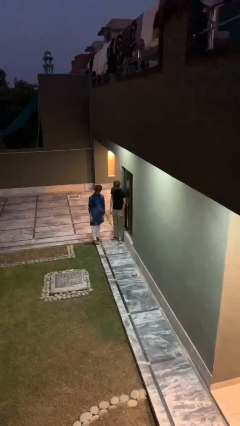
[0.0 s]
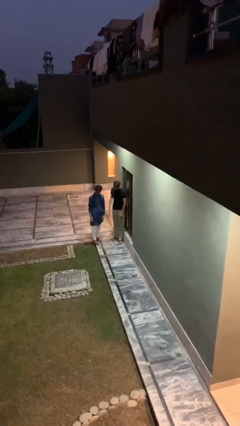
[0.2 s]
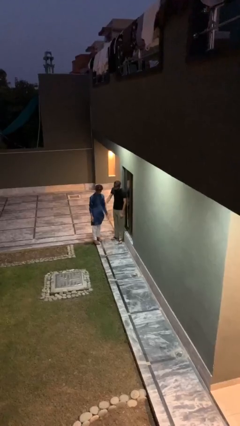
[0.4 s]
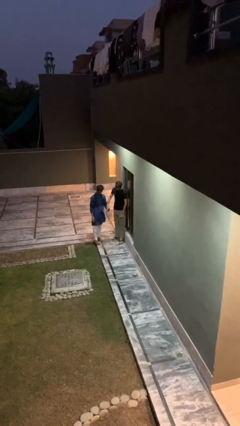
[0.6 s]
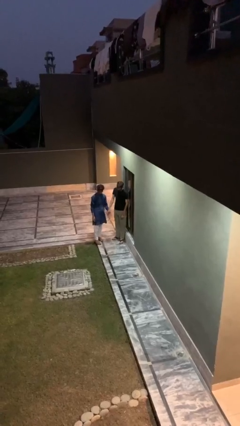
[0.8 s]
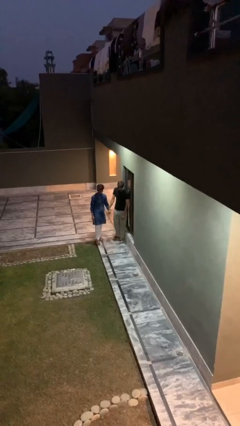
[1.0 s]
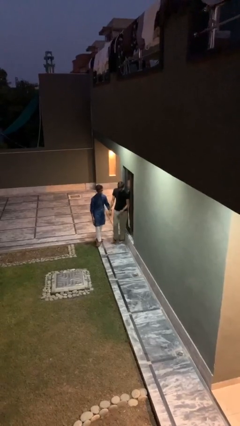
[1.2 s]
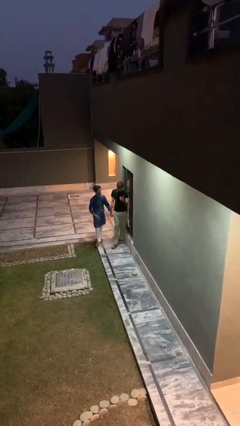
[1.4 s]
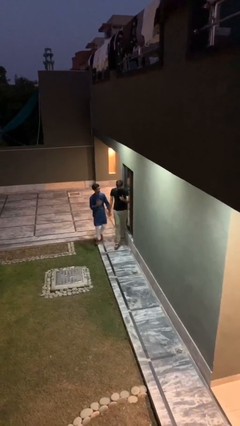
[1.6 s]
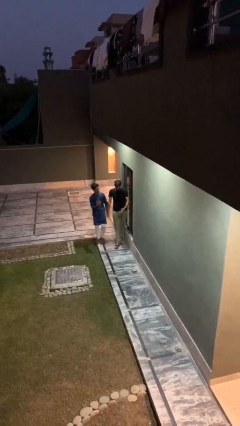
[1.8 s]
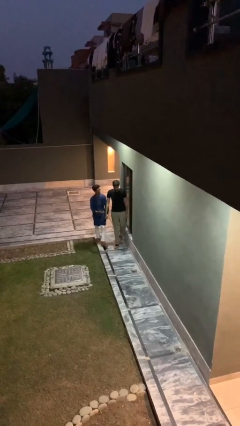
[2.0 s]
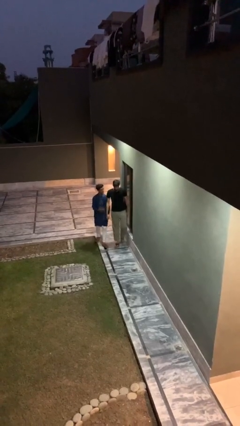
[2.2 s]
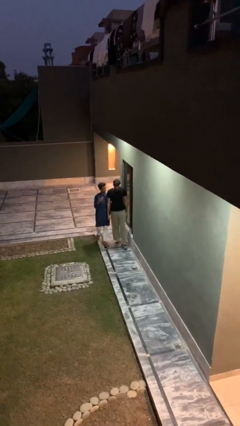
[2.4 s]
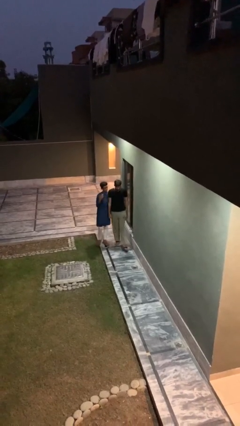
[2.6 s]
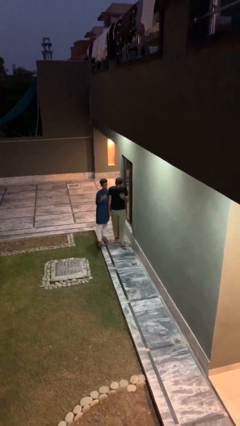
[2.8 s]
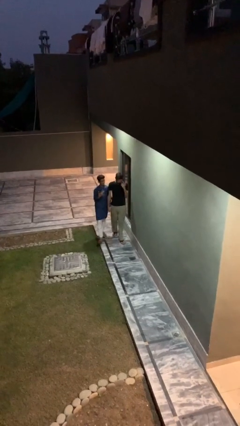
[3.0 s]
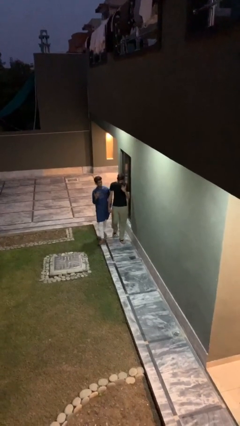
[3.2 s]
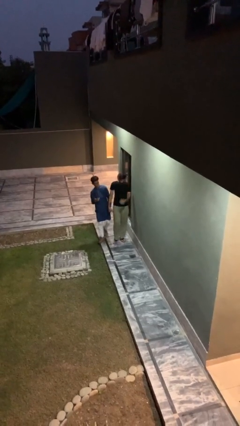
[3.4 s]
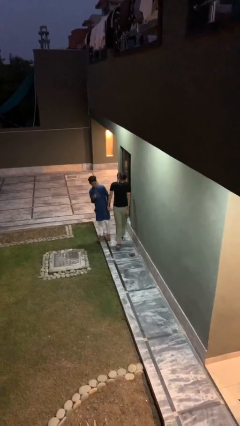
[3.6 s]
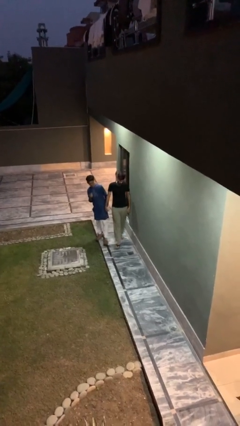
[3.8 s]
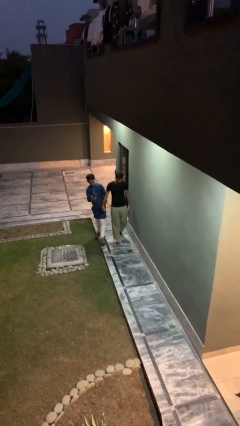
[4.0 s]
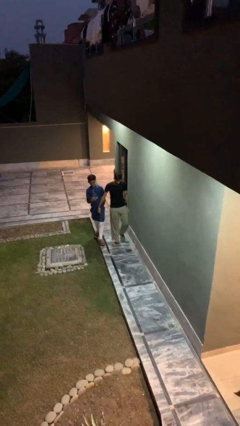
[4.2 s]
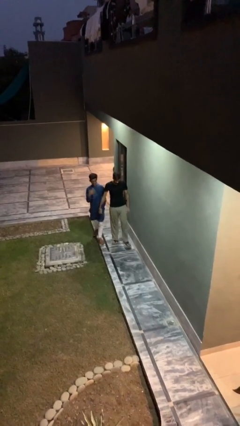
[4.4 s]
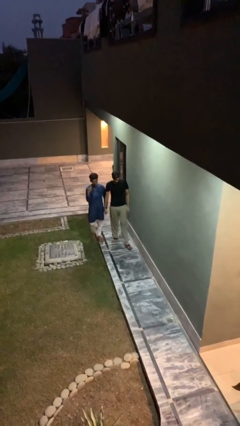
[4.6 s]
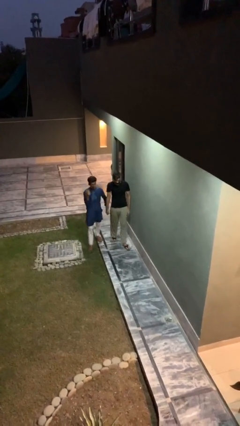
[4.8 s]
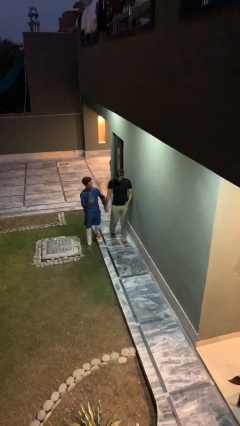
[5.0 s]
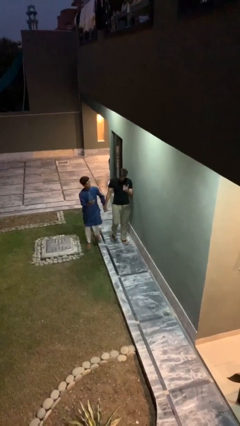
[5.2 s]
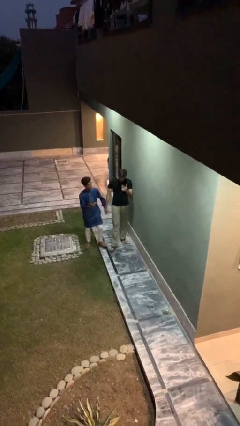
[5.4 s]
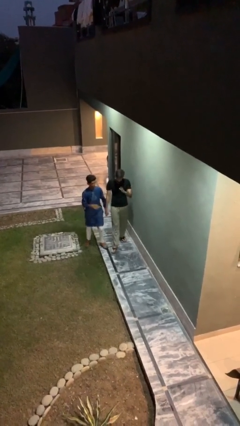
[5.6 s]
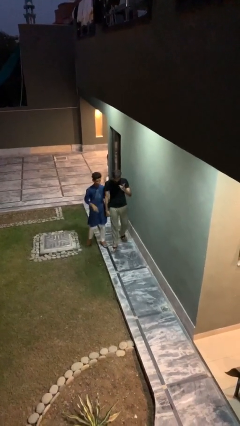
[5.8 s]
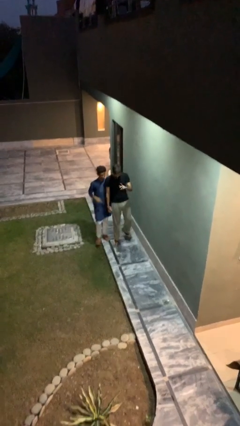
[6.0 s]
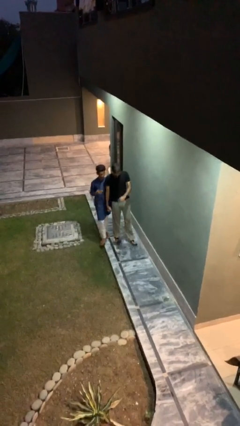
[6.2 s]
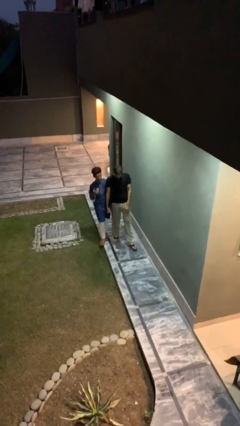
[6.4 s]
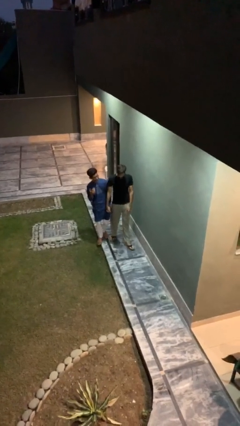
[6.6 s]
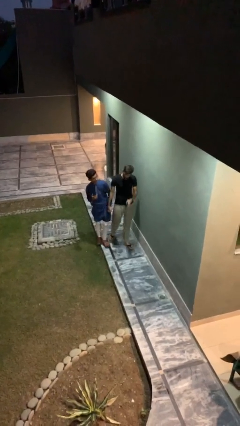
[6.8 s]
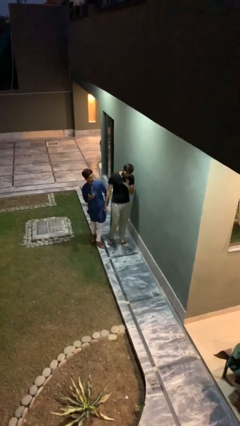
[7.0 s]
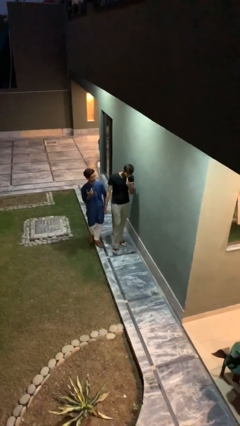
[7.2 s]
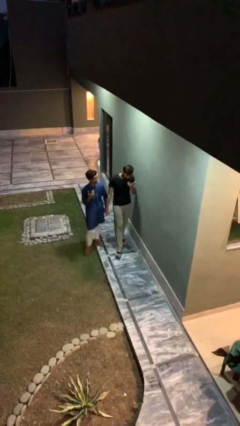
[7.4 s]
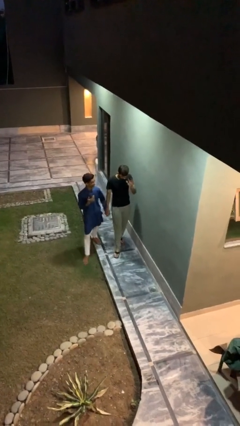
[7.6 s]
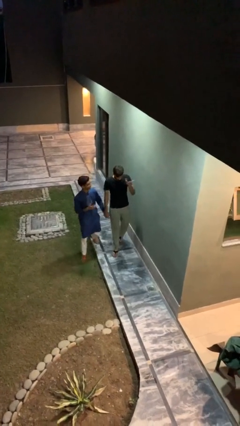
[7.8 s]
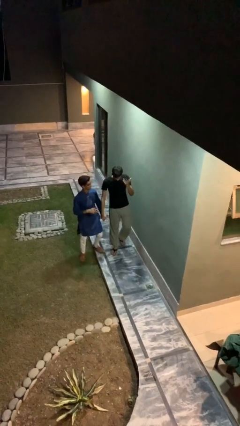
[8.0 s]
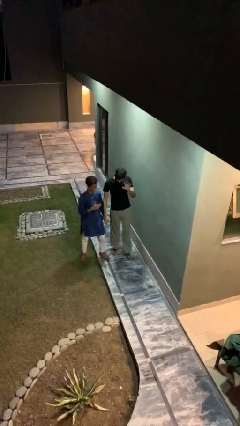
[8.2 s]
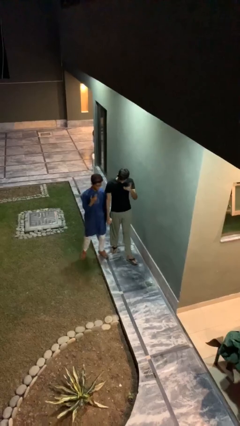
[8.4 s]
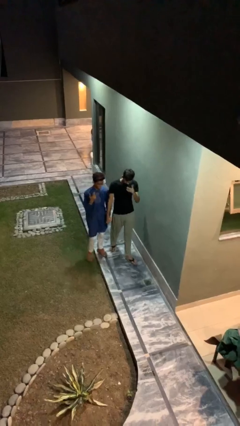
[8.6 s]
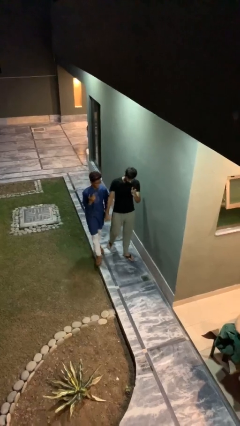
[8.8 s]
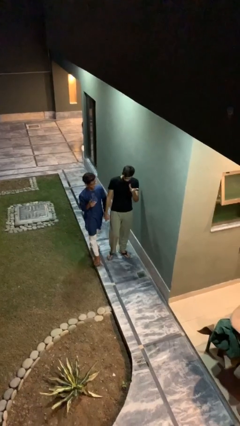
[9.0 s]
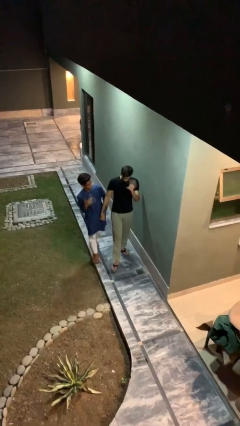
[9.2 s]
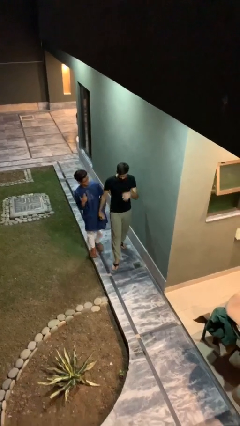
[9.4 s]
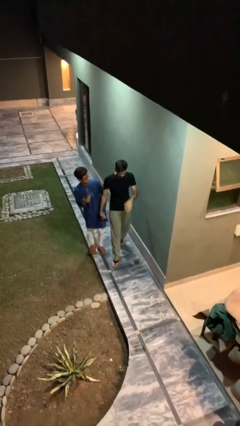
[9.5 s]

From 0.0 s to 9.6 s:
person holds hand

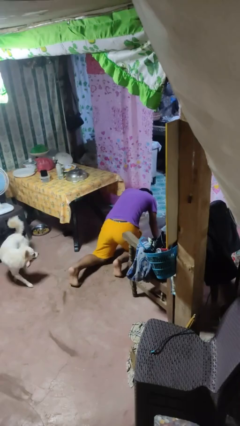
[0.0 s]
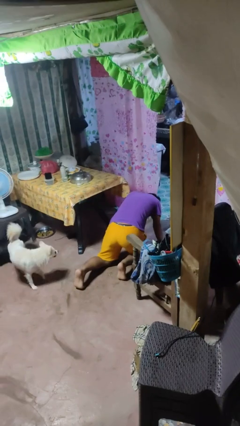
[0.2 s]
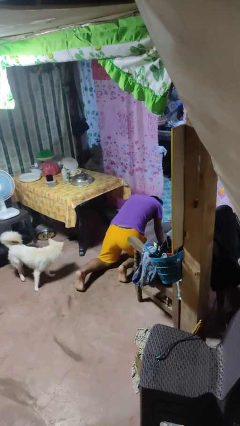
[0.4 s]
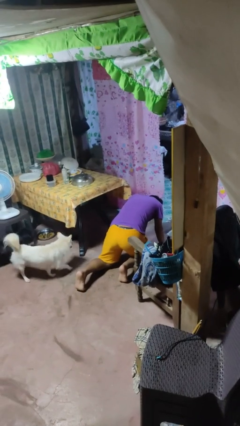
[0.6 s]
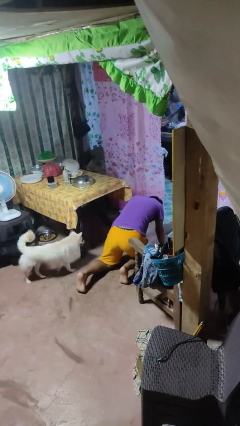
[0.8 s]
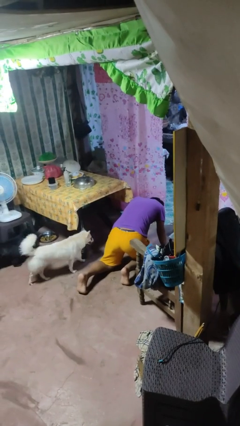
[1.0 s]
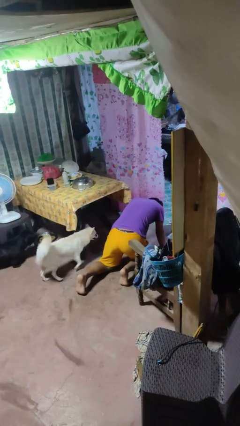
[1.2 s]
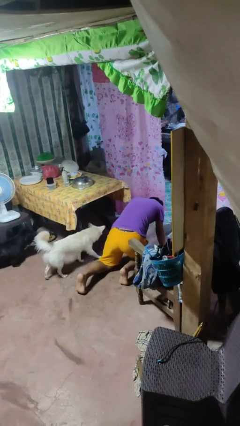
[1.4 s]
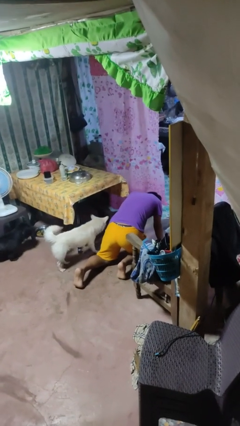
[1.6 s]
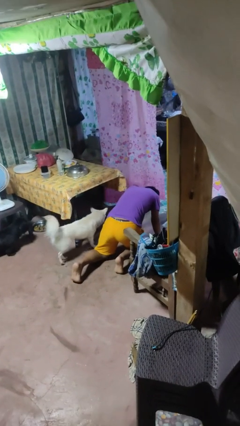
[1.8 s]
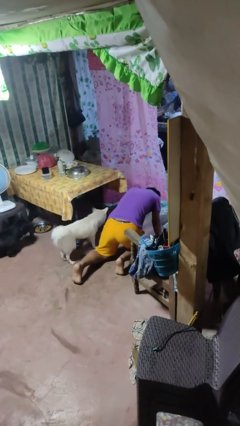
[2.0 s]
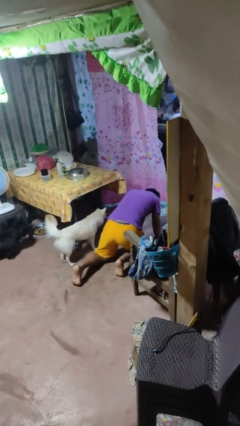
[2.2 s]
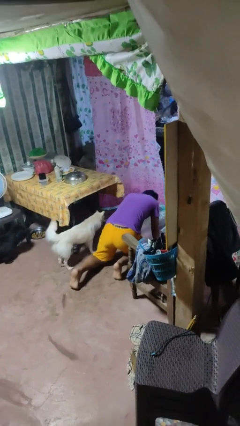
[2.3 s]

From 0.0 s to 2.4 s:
person lies down on floor

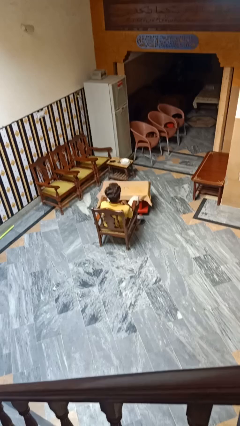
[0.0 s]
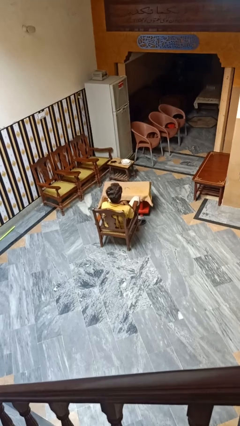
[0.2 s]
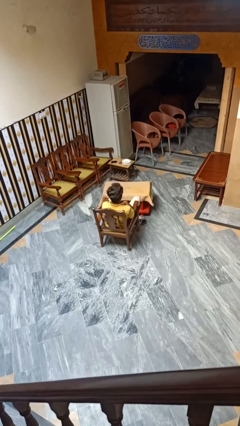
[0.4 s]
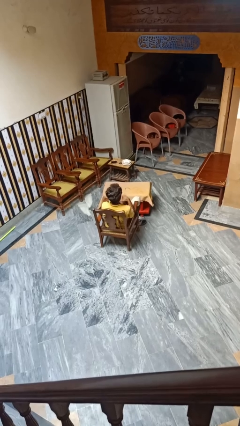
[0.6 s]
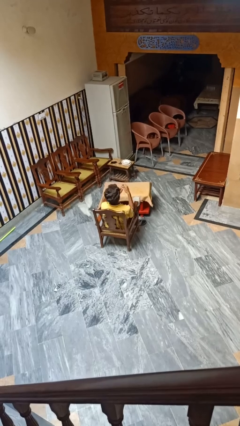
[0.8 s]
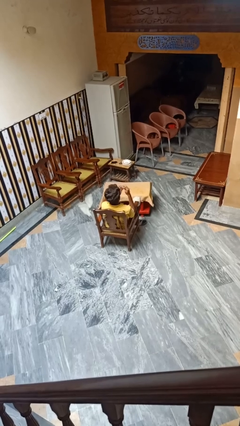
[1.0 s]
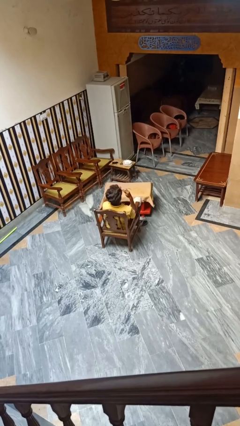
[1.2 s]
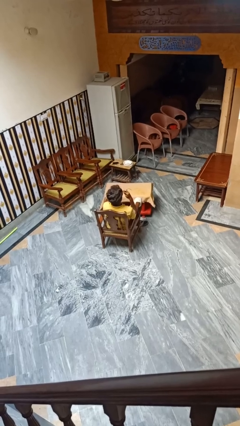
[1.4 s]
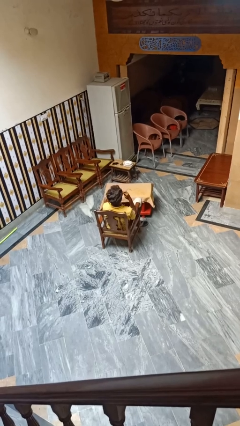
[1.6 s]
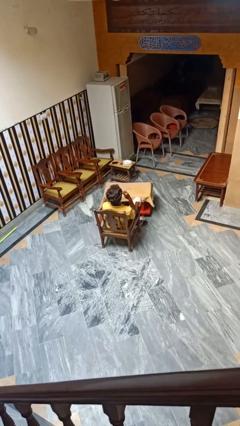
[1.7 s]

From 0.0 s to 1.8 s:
person clips fingernails

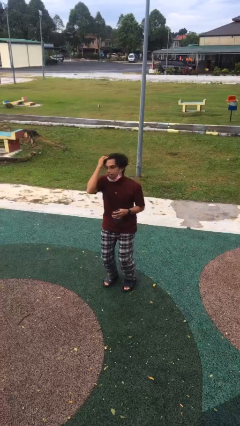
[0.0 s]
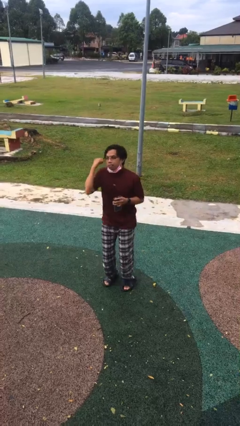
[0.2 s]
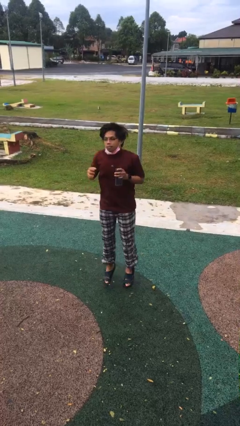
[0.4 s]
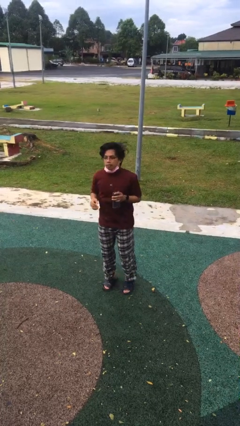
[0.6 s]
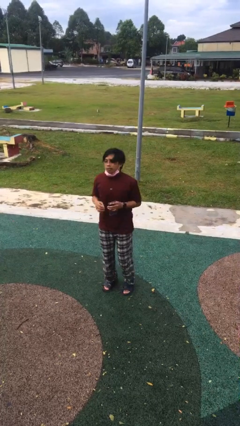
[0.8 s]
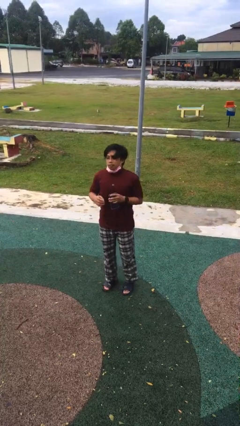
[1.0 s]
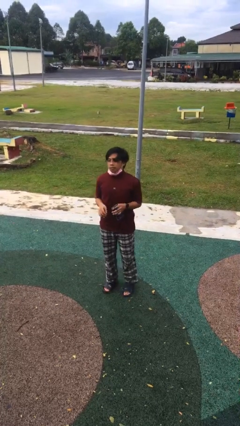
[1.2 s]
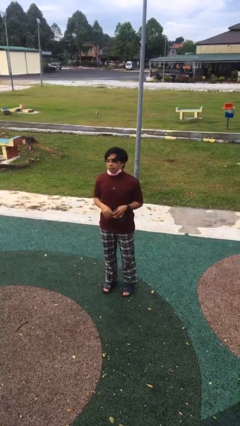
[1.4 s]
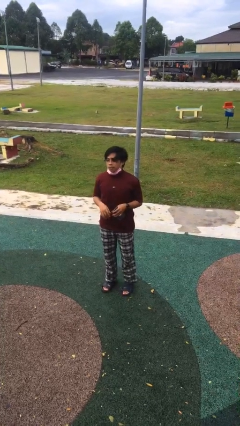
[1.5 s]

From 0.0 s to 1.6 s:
person jumps

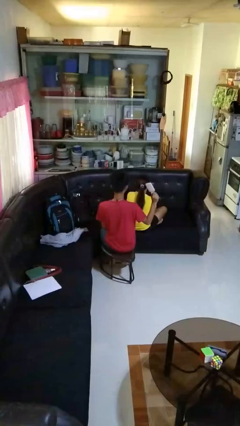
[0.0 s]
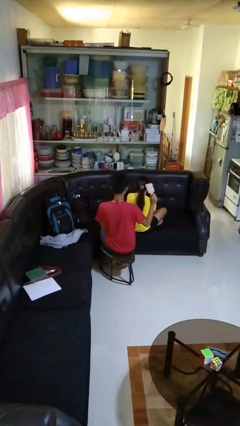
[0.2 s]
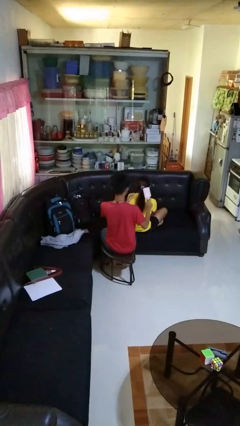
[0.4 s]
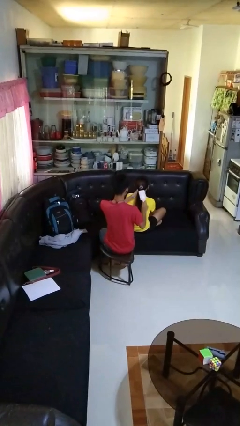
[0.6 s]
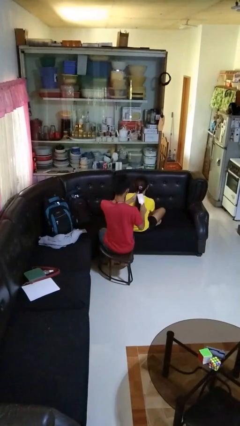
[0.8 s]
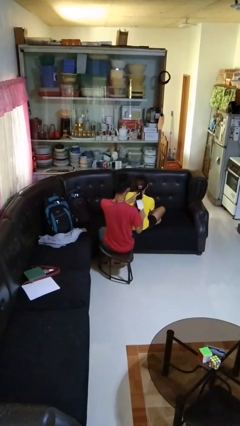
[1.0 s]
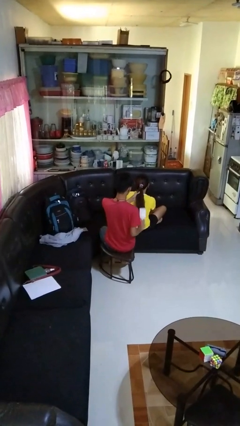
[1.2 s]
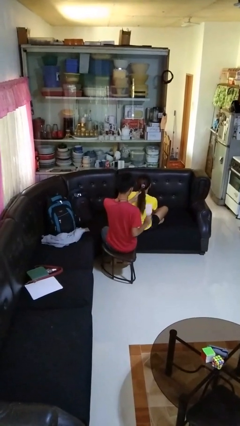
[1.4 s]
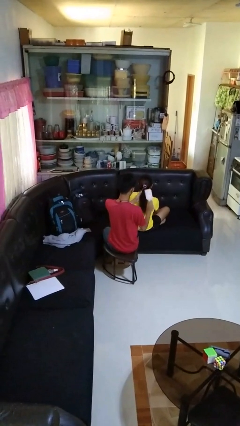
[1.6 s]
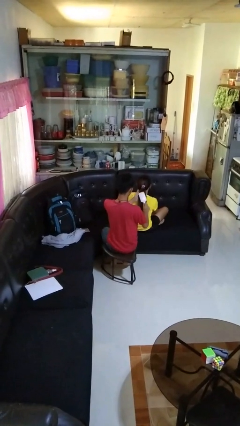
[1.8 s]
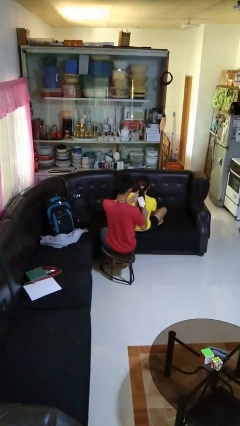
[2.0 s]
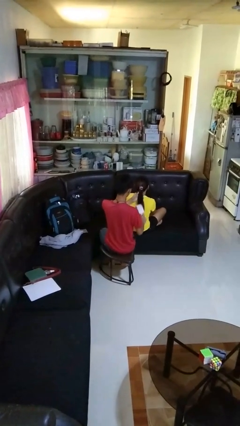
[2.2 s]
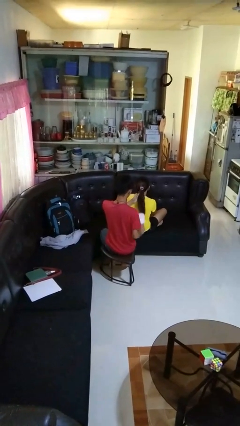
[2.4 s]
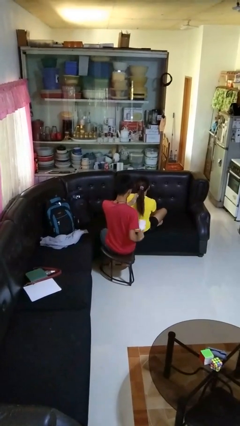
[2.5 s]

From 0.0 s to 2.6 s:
person brushes hair of person
